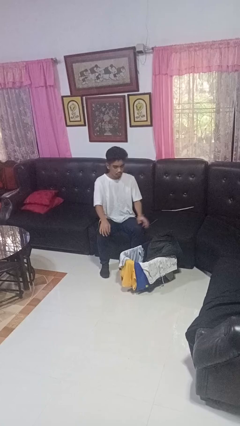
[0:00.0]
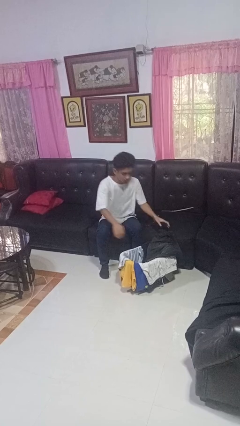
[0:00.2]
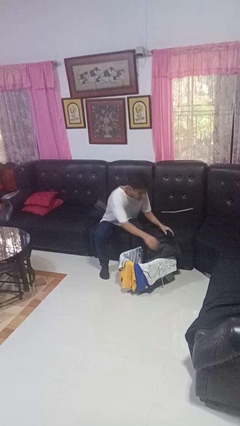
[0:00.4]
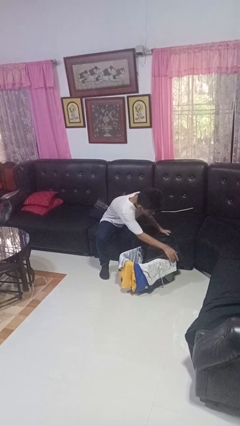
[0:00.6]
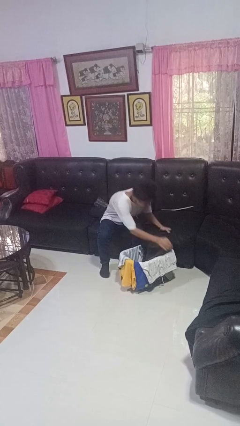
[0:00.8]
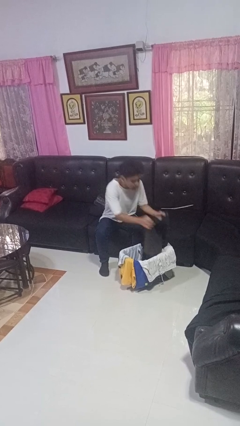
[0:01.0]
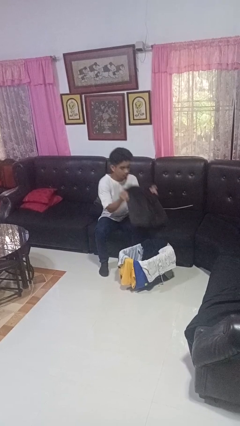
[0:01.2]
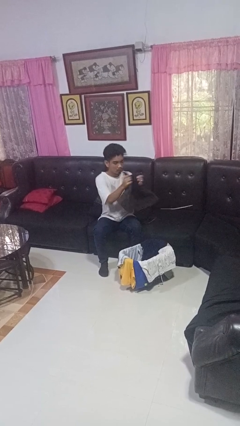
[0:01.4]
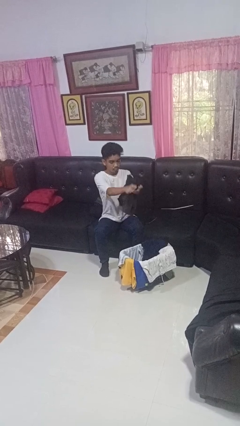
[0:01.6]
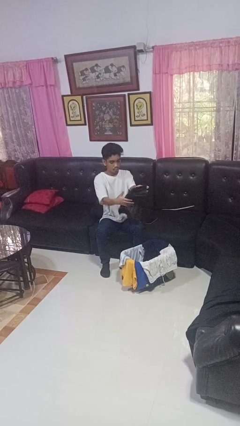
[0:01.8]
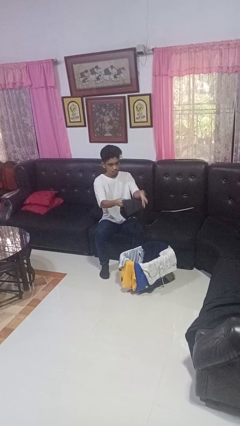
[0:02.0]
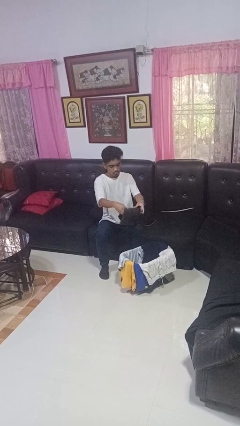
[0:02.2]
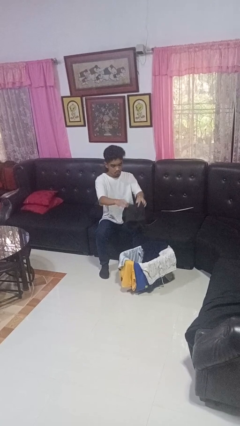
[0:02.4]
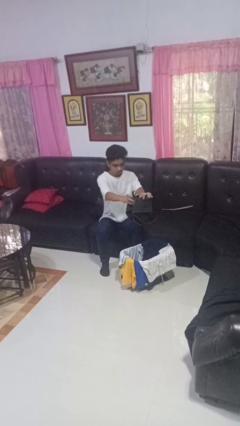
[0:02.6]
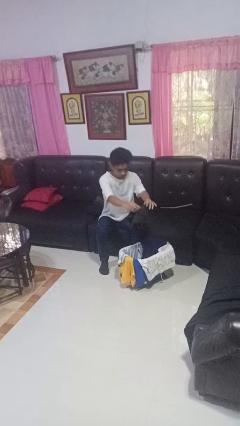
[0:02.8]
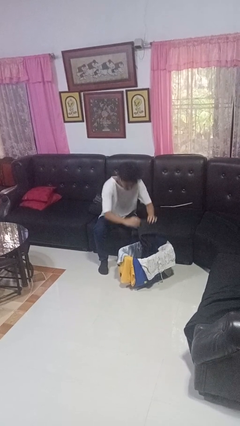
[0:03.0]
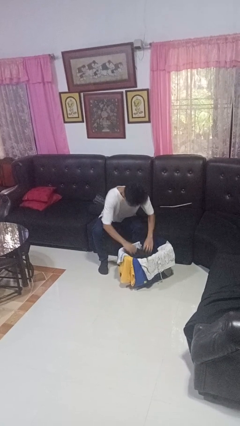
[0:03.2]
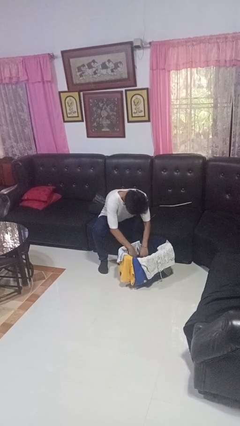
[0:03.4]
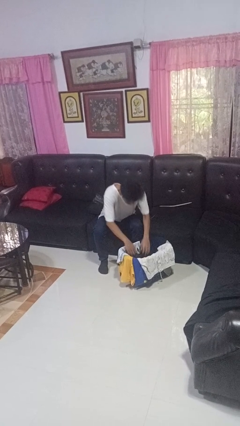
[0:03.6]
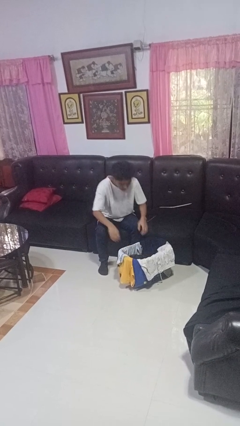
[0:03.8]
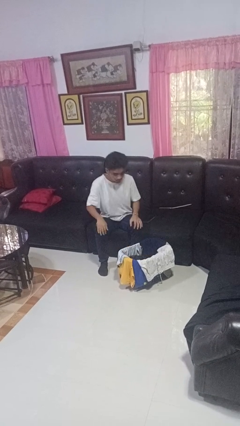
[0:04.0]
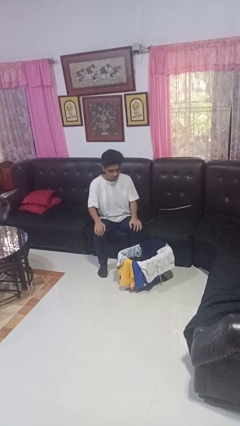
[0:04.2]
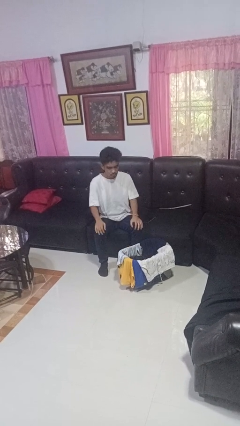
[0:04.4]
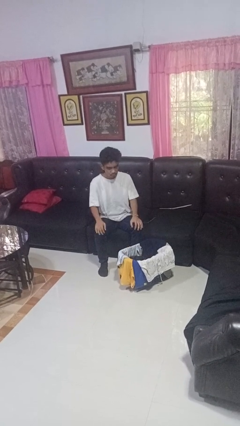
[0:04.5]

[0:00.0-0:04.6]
person folds pants

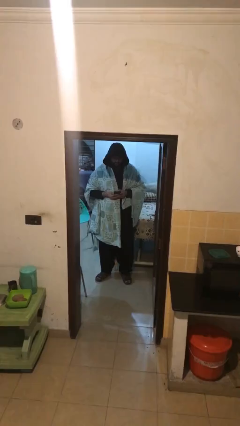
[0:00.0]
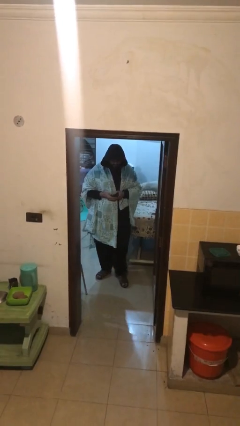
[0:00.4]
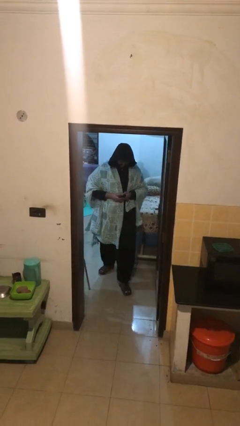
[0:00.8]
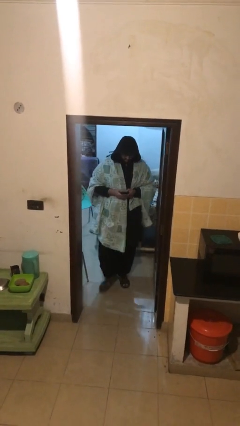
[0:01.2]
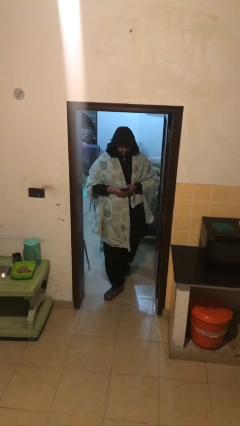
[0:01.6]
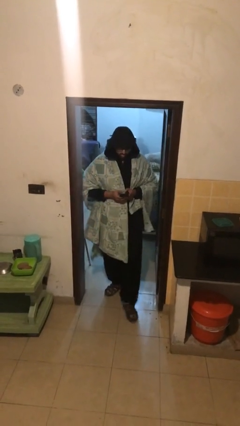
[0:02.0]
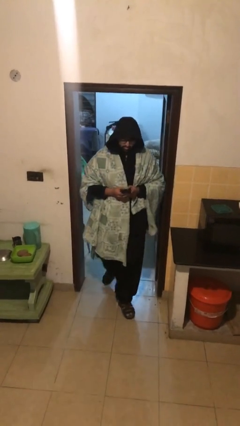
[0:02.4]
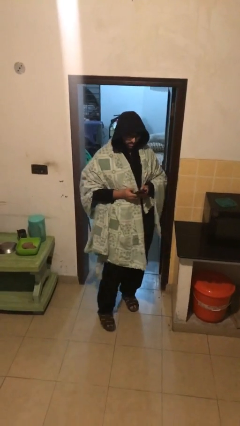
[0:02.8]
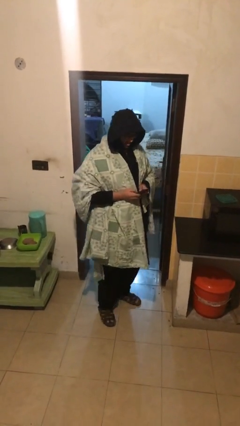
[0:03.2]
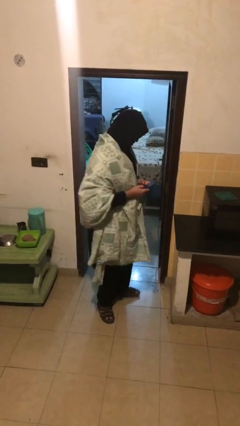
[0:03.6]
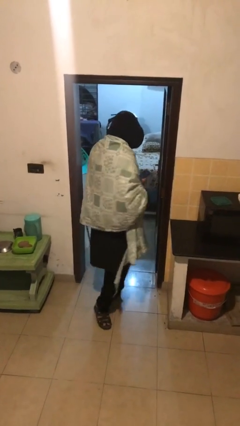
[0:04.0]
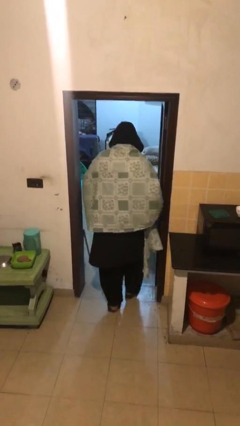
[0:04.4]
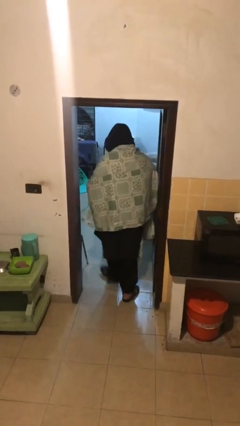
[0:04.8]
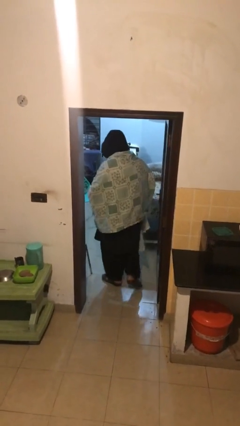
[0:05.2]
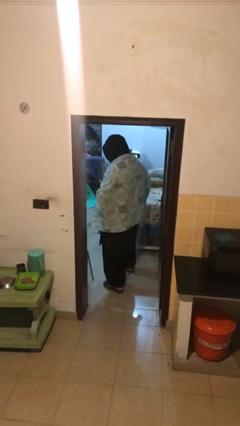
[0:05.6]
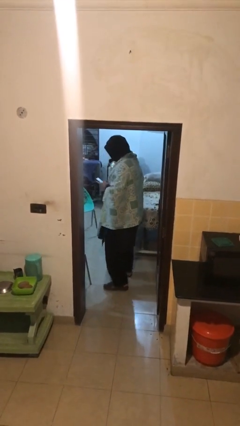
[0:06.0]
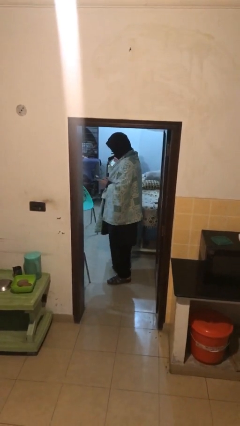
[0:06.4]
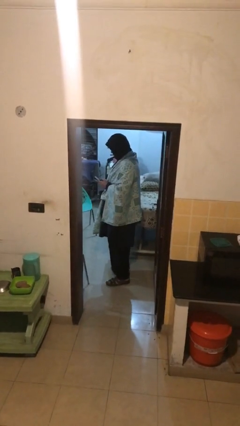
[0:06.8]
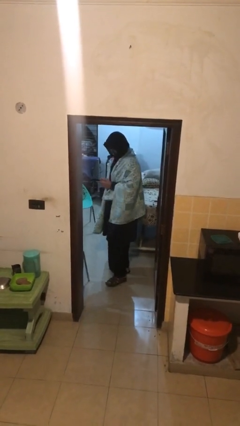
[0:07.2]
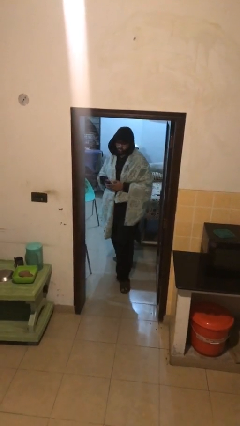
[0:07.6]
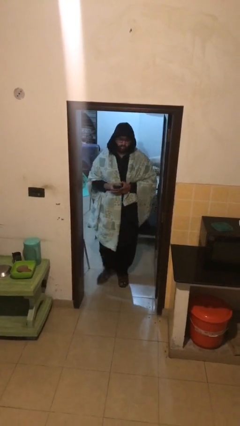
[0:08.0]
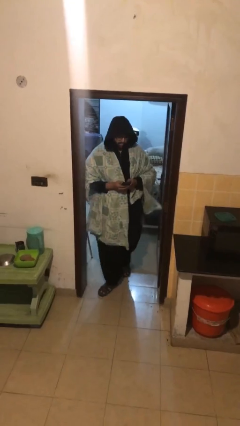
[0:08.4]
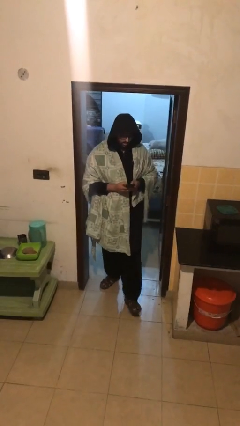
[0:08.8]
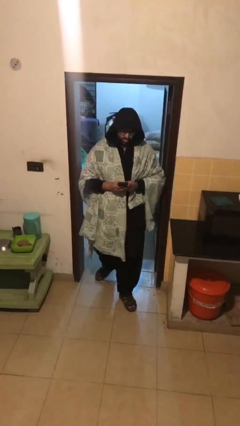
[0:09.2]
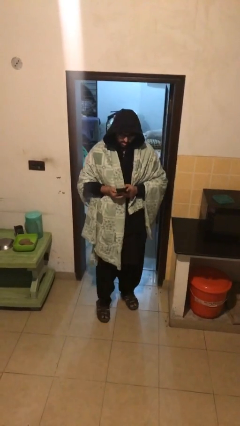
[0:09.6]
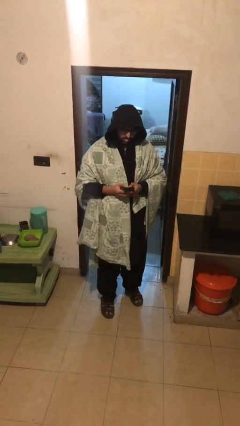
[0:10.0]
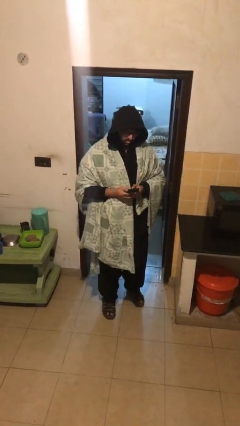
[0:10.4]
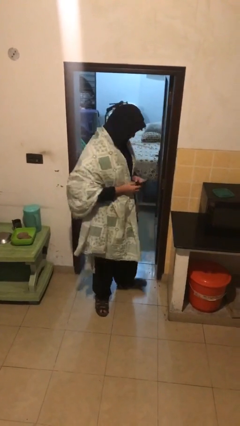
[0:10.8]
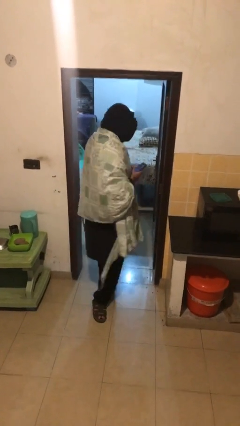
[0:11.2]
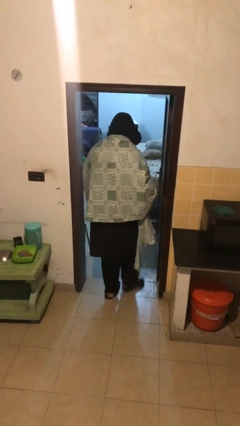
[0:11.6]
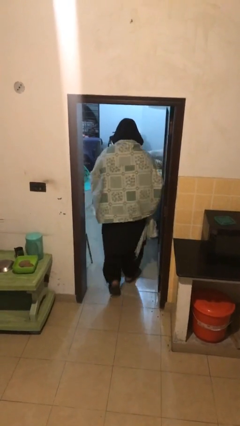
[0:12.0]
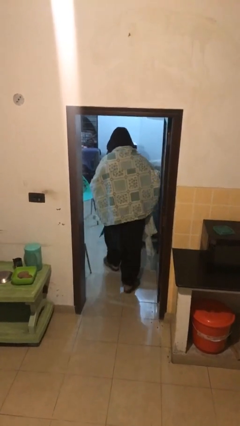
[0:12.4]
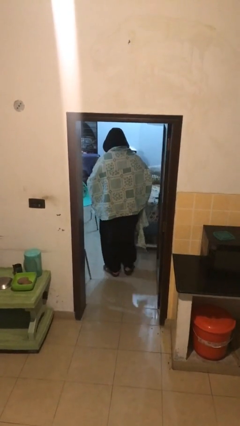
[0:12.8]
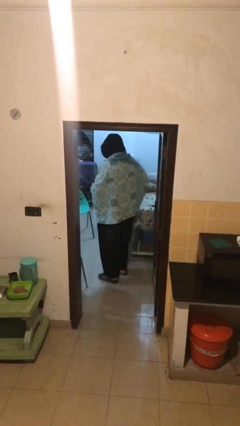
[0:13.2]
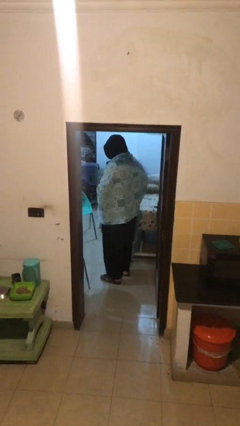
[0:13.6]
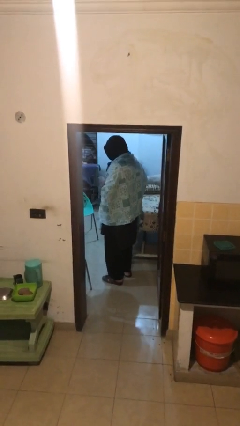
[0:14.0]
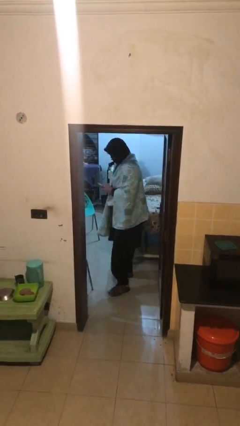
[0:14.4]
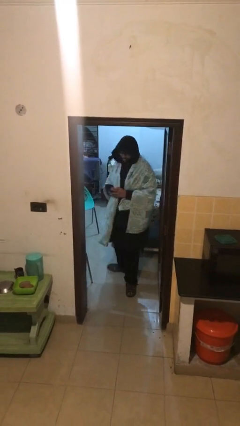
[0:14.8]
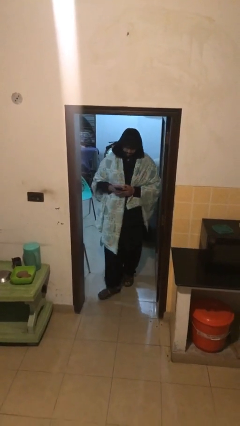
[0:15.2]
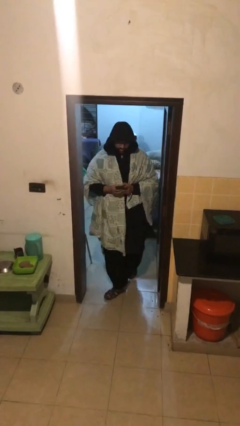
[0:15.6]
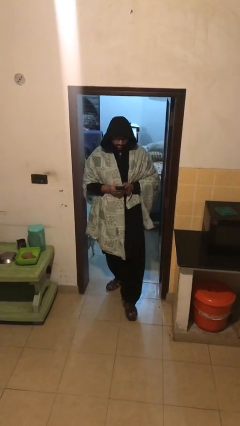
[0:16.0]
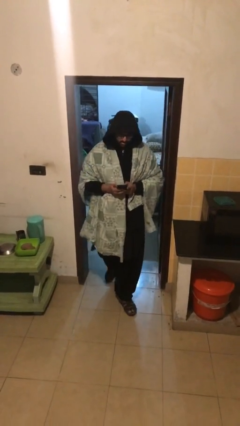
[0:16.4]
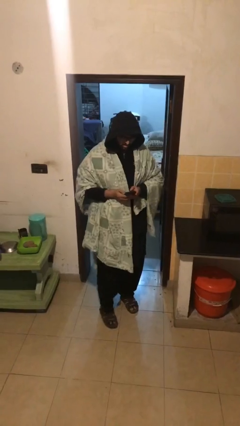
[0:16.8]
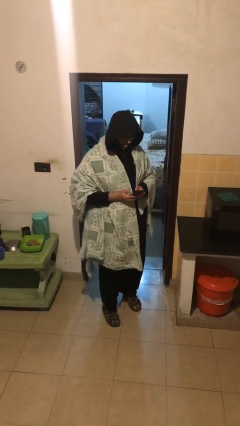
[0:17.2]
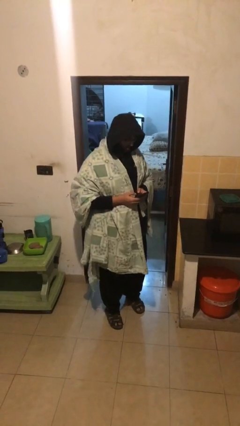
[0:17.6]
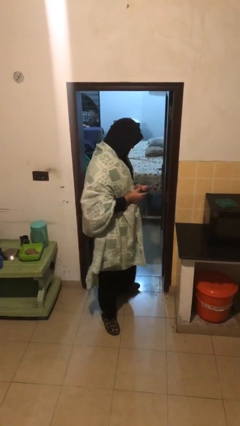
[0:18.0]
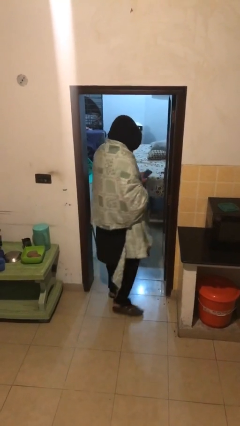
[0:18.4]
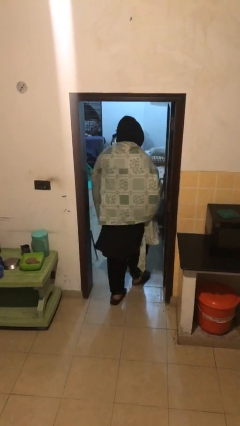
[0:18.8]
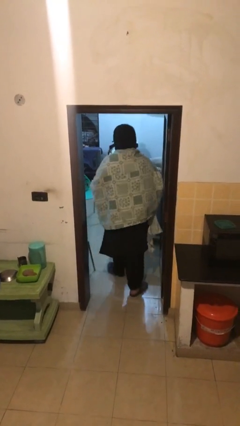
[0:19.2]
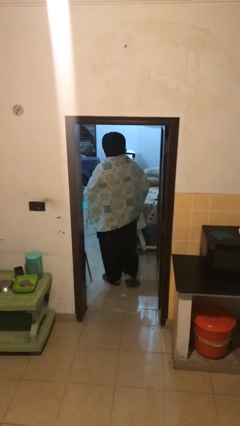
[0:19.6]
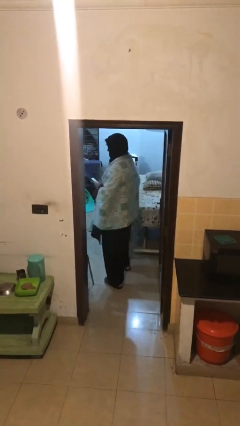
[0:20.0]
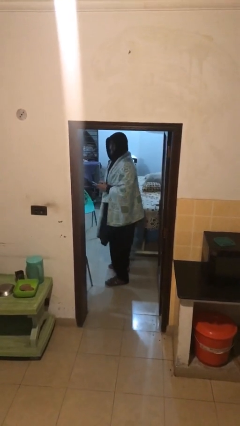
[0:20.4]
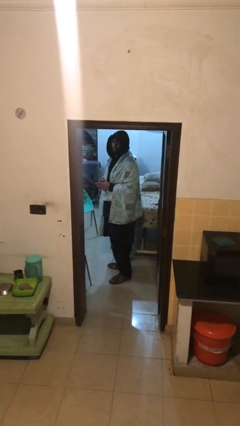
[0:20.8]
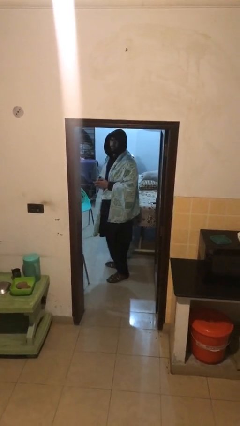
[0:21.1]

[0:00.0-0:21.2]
person texts on phone

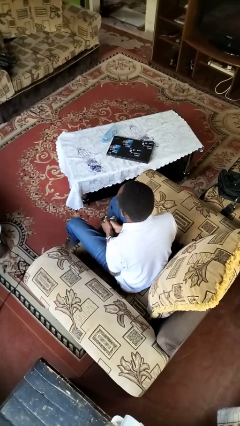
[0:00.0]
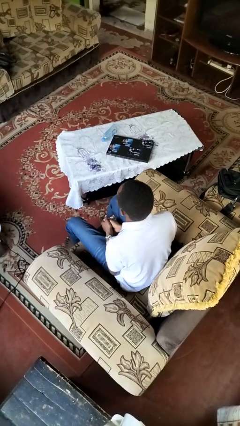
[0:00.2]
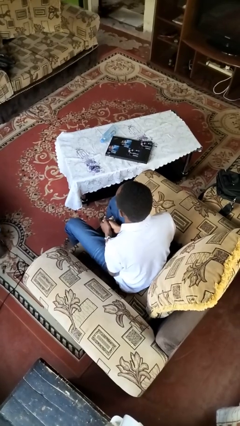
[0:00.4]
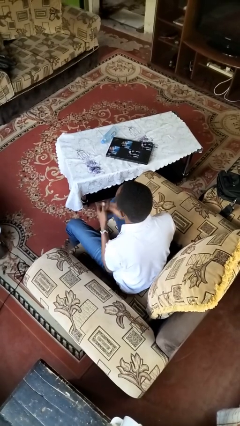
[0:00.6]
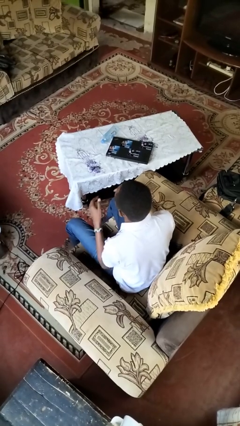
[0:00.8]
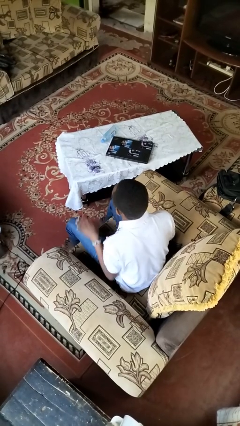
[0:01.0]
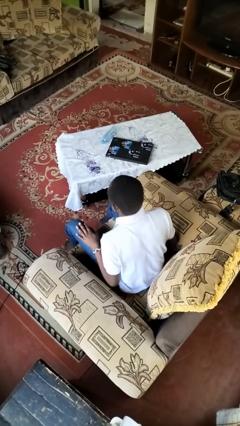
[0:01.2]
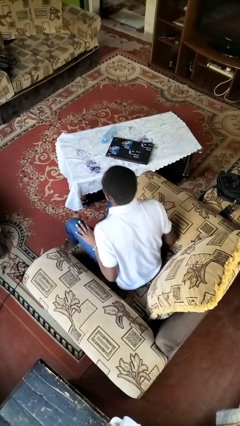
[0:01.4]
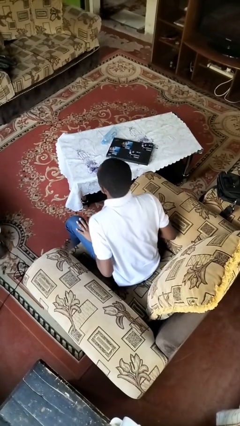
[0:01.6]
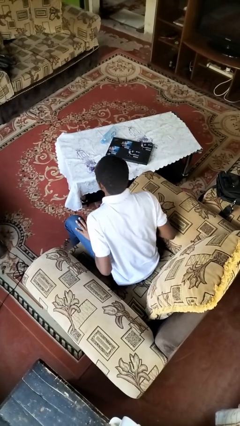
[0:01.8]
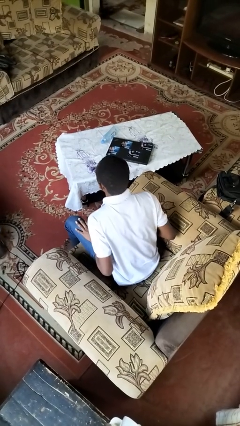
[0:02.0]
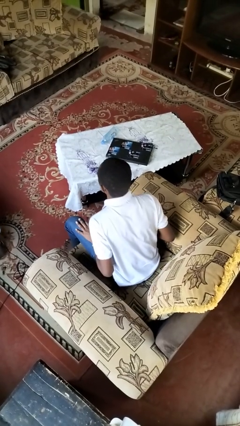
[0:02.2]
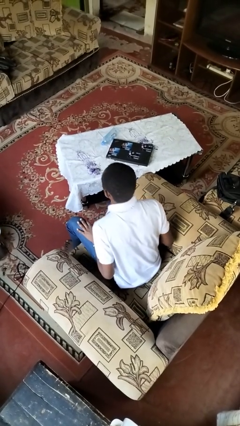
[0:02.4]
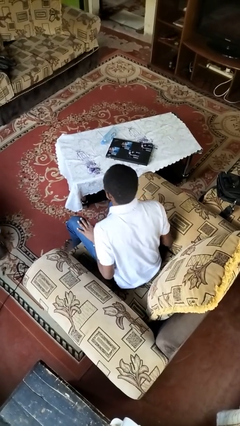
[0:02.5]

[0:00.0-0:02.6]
person slaps hands on thighs

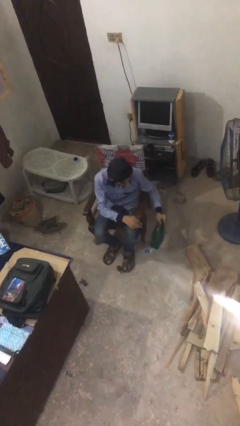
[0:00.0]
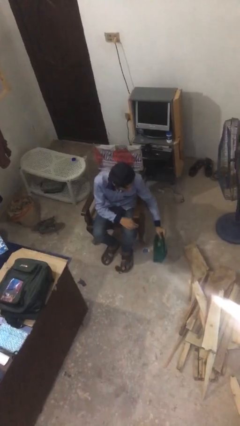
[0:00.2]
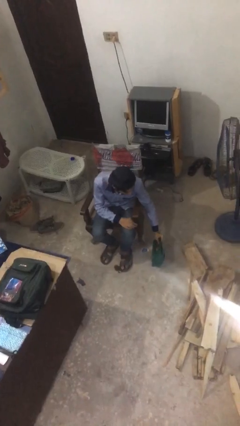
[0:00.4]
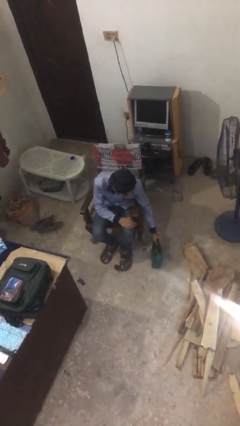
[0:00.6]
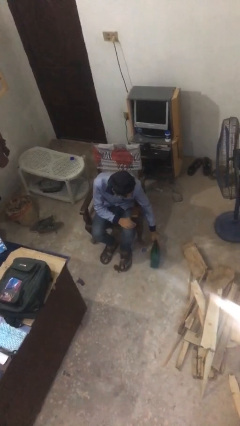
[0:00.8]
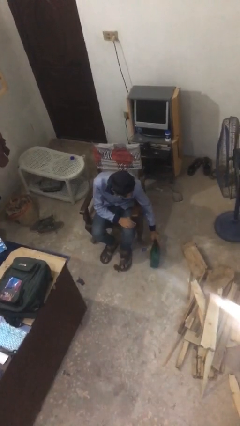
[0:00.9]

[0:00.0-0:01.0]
person puts down object on floor
